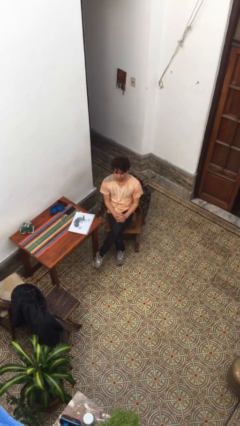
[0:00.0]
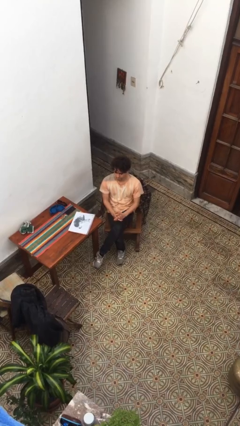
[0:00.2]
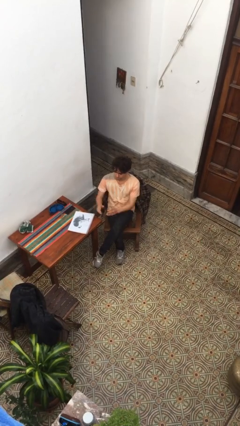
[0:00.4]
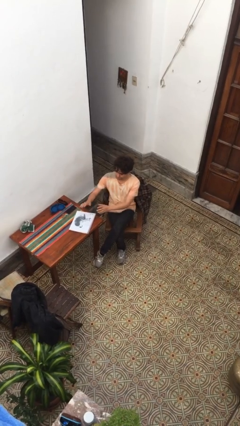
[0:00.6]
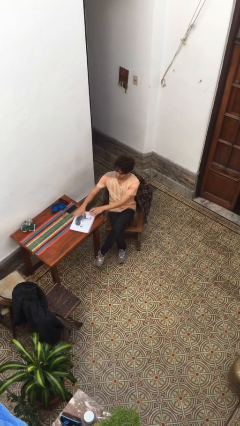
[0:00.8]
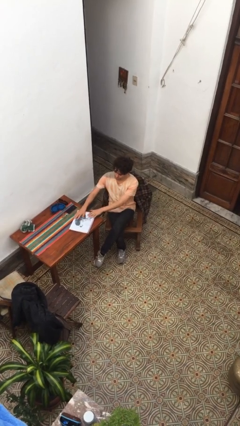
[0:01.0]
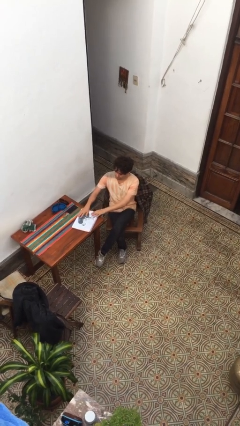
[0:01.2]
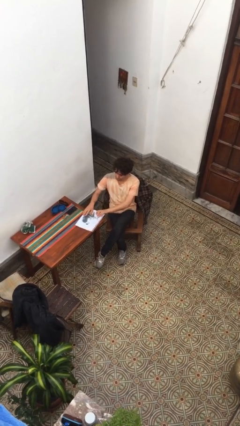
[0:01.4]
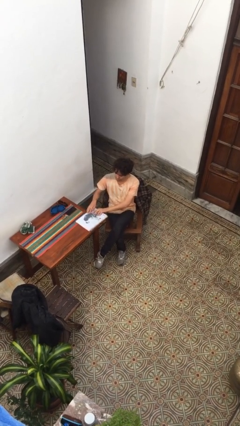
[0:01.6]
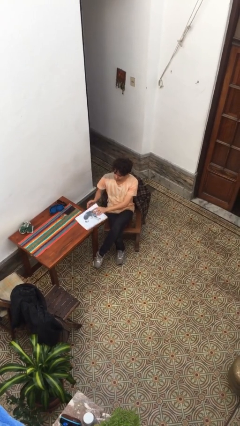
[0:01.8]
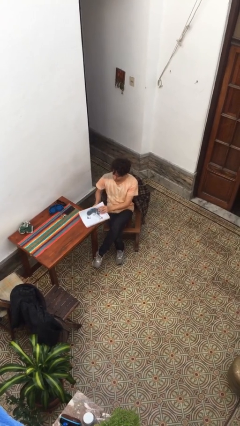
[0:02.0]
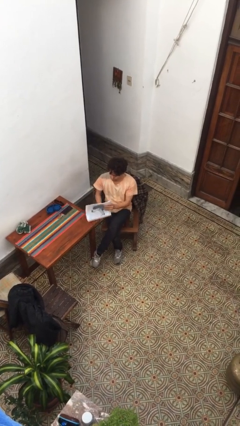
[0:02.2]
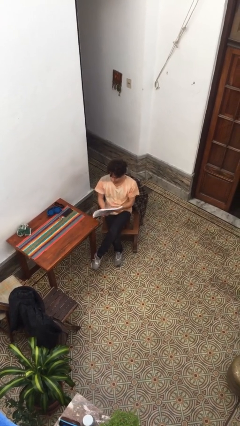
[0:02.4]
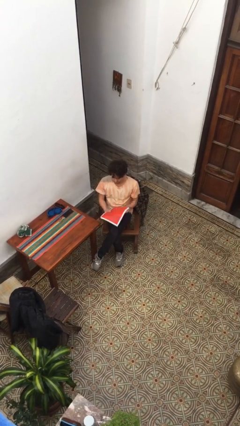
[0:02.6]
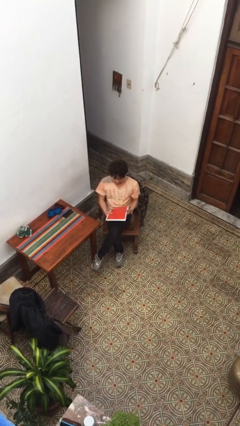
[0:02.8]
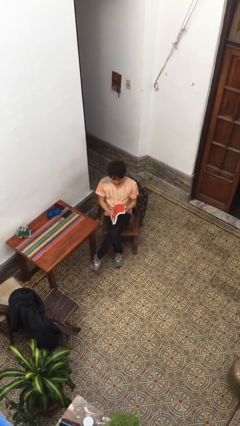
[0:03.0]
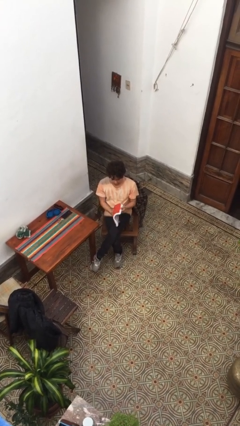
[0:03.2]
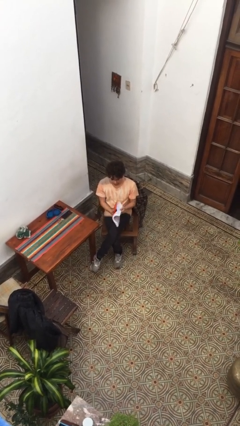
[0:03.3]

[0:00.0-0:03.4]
person picks up object from table

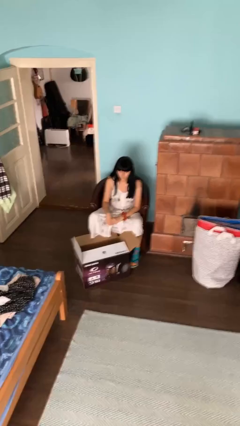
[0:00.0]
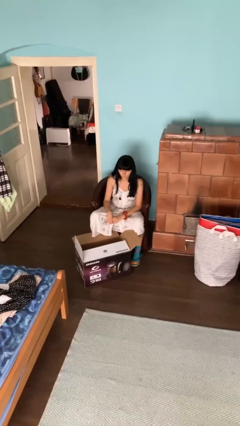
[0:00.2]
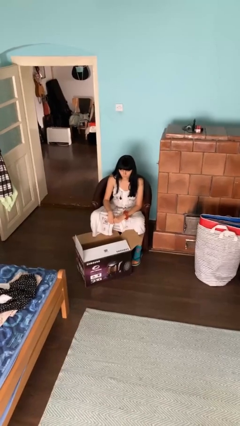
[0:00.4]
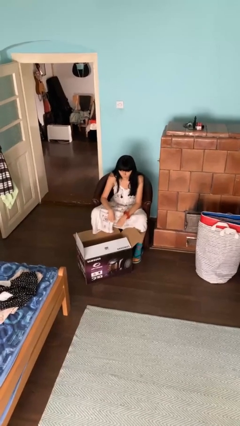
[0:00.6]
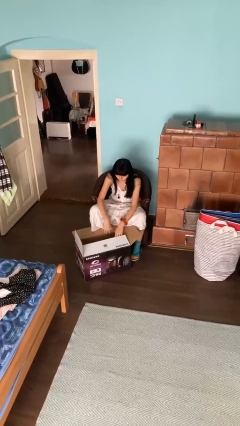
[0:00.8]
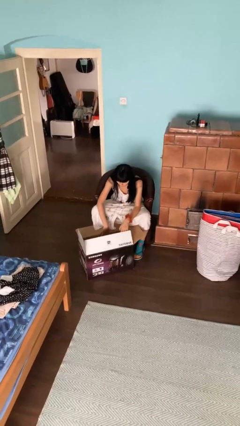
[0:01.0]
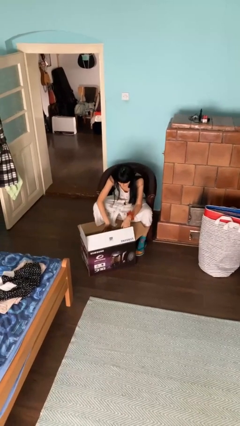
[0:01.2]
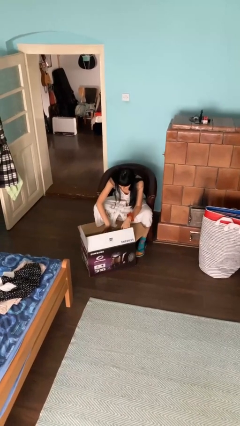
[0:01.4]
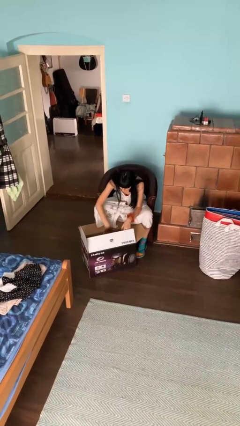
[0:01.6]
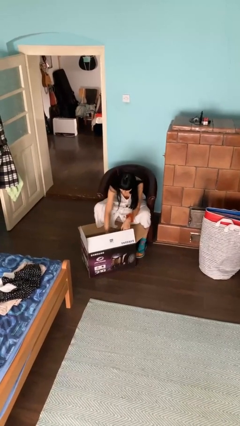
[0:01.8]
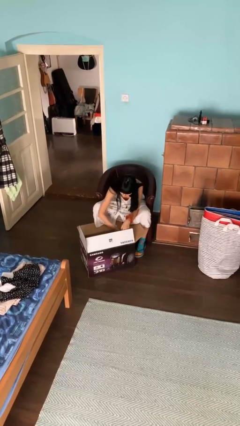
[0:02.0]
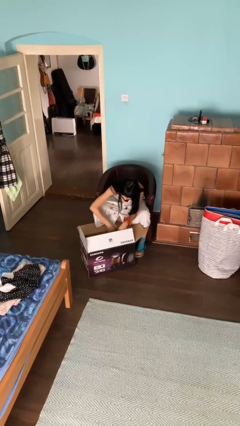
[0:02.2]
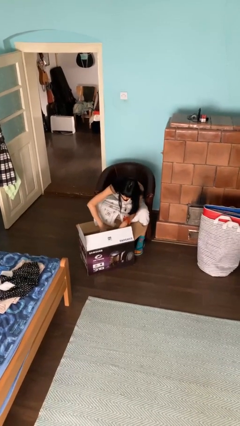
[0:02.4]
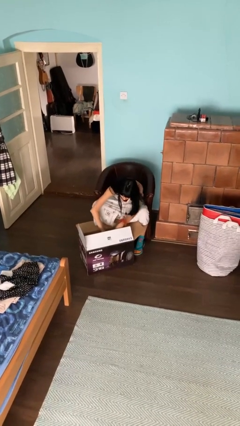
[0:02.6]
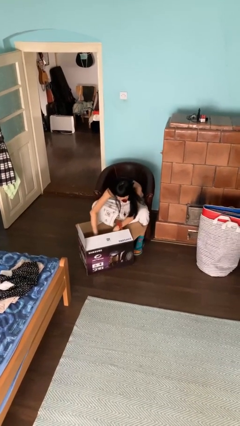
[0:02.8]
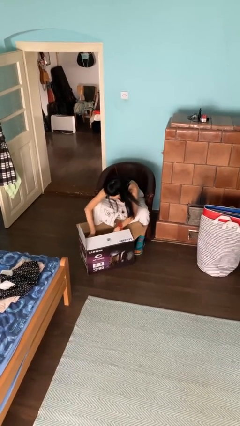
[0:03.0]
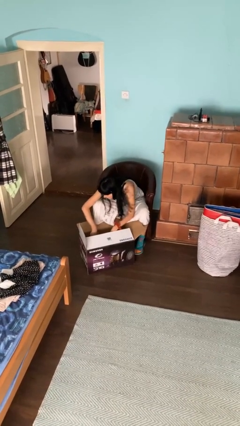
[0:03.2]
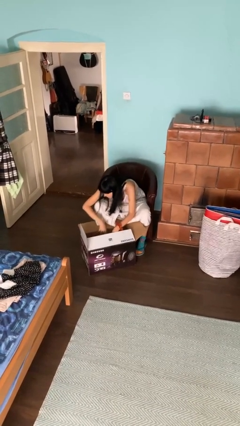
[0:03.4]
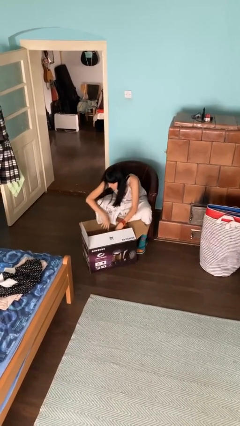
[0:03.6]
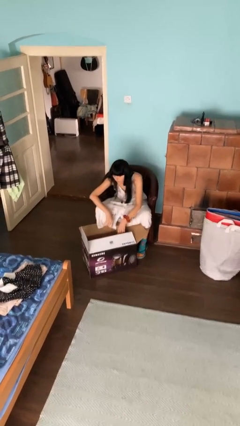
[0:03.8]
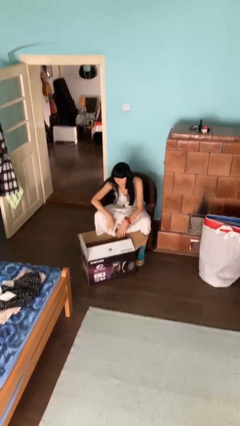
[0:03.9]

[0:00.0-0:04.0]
person searches in box

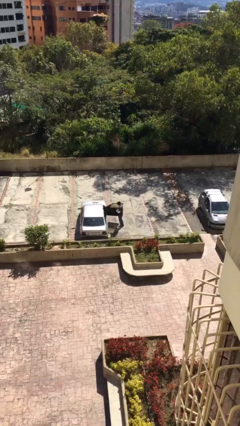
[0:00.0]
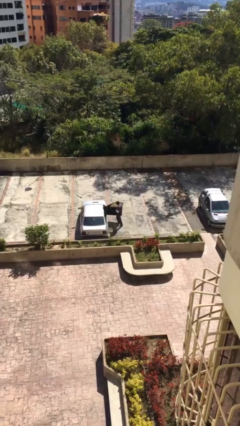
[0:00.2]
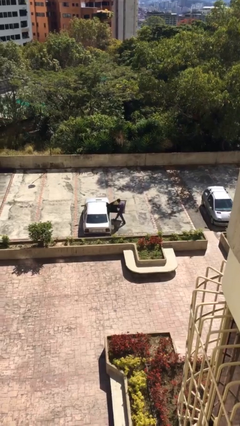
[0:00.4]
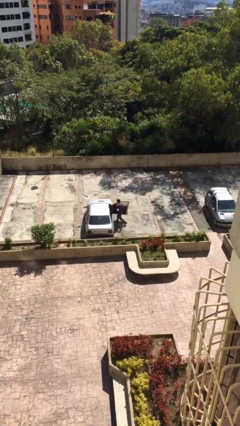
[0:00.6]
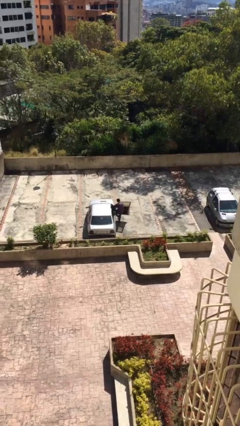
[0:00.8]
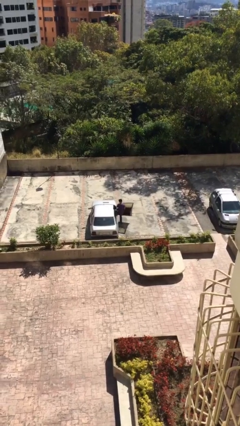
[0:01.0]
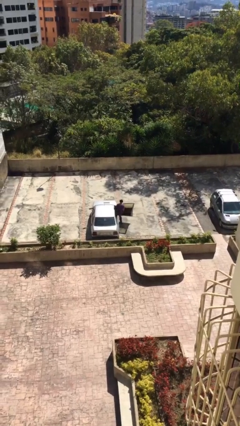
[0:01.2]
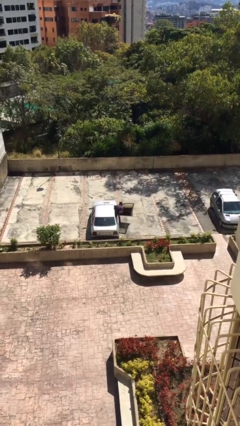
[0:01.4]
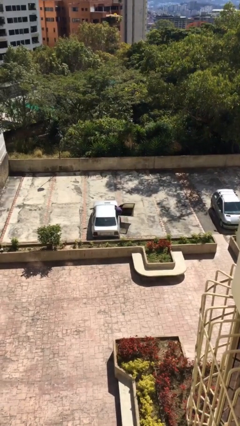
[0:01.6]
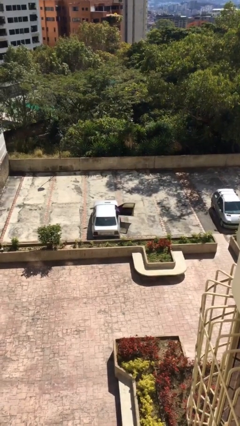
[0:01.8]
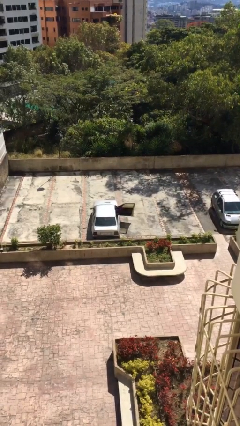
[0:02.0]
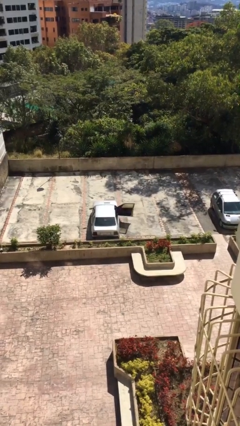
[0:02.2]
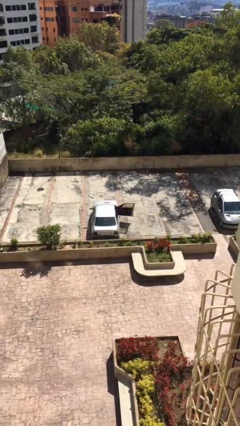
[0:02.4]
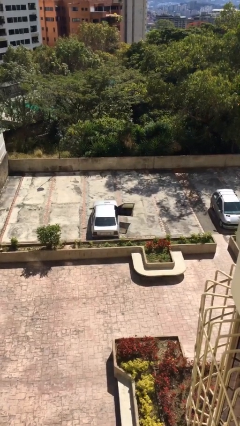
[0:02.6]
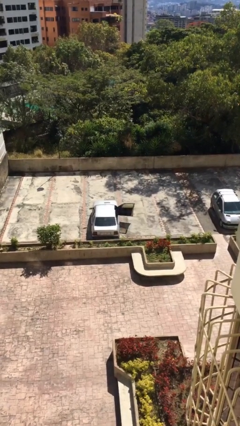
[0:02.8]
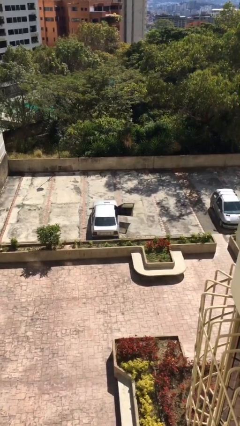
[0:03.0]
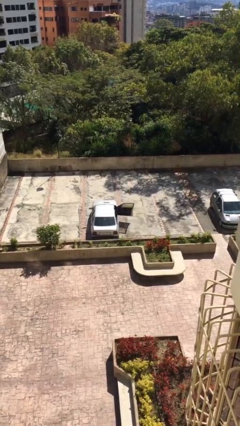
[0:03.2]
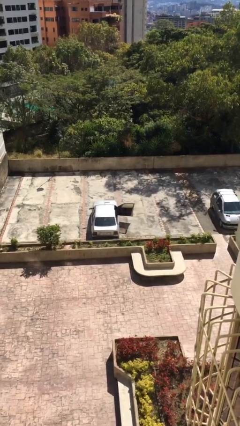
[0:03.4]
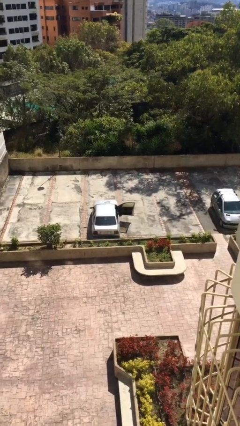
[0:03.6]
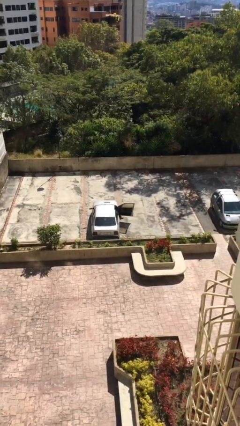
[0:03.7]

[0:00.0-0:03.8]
person enters car

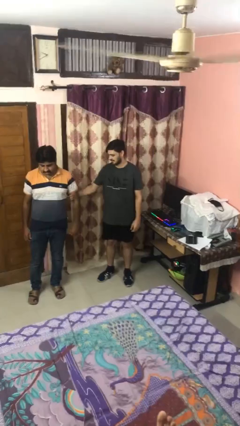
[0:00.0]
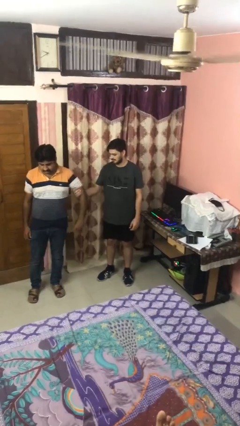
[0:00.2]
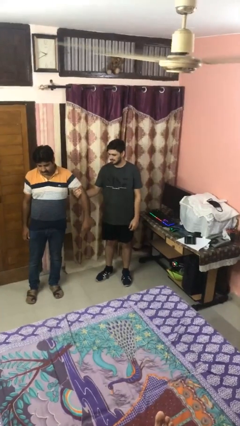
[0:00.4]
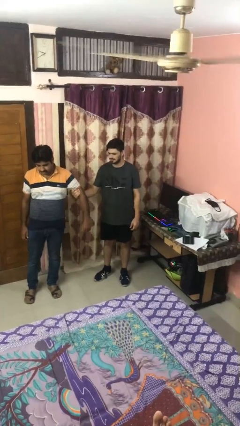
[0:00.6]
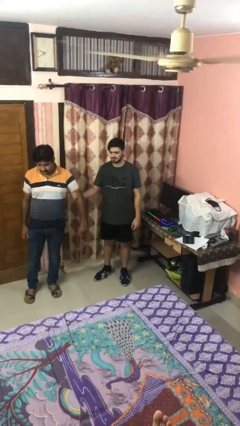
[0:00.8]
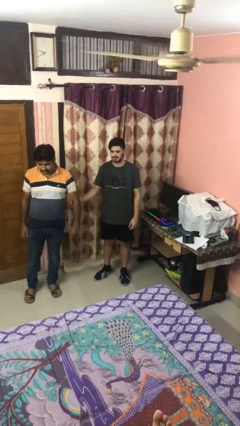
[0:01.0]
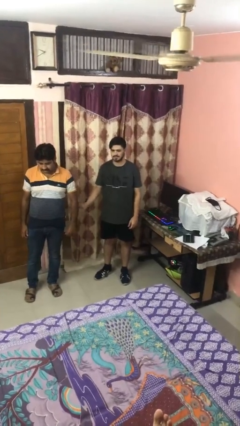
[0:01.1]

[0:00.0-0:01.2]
person grabs person by bicep

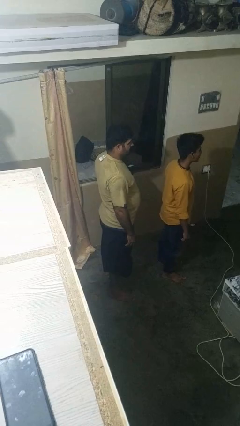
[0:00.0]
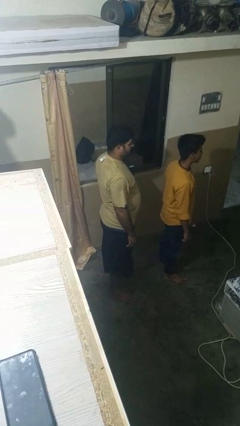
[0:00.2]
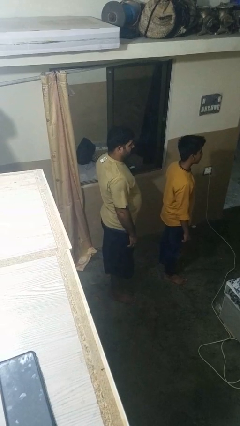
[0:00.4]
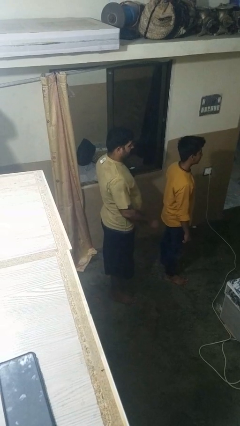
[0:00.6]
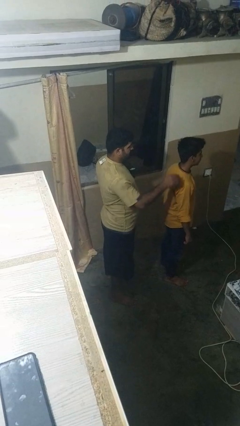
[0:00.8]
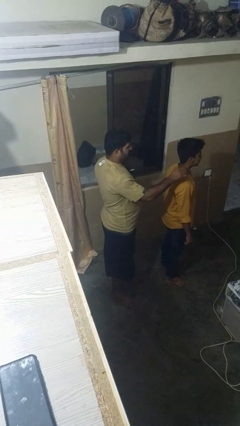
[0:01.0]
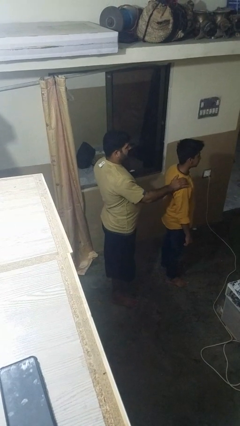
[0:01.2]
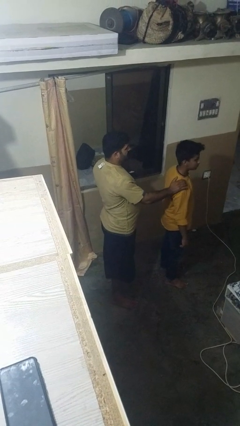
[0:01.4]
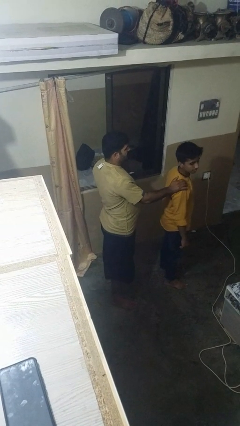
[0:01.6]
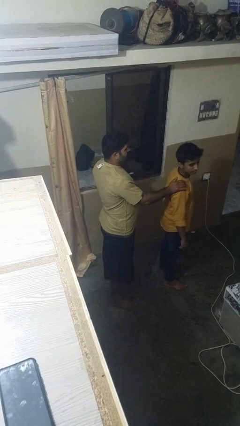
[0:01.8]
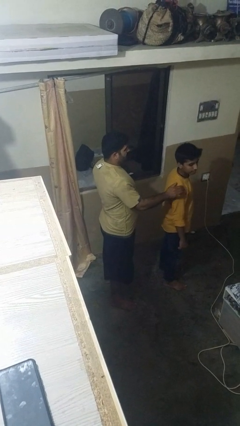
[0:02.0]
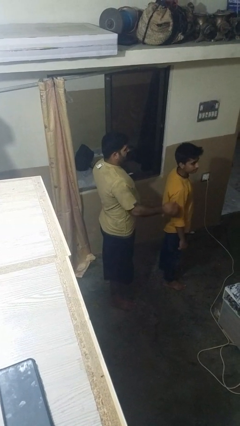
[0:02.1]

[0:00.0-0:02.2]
person waves at person

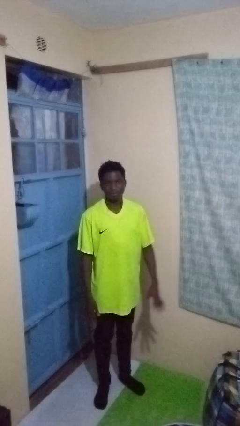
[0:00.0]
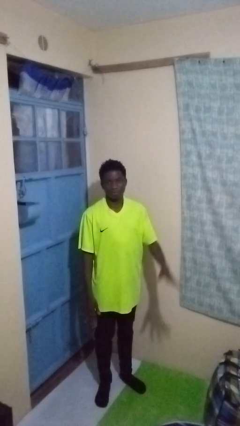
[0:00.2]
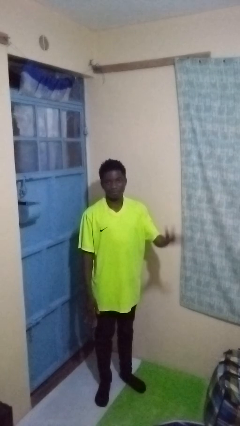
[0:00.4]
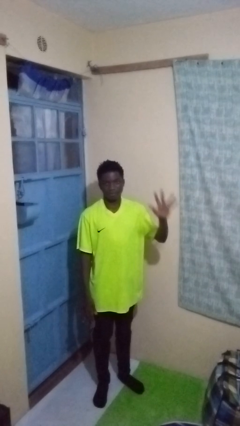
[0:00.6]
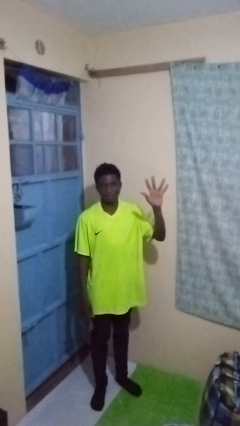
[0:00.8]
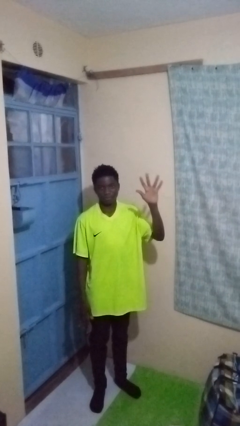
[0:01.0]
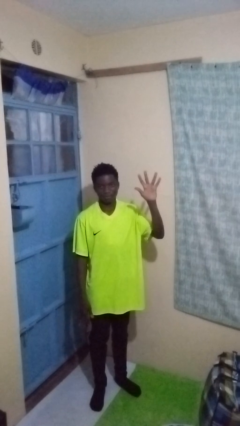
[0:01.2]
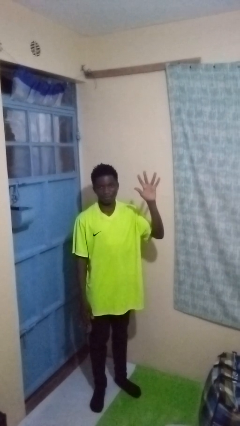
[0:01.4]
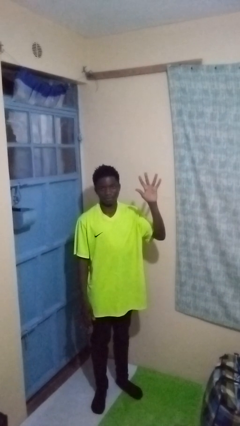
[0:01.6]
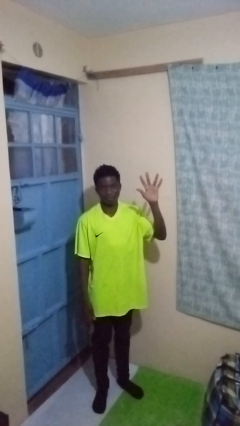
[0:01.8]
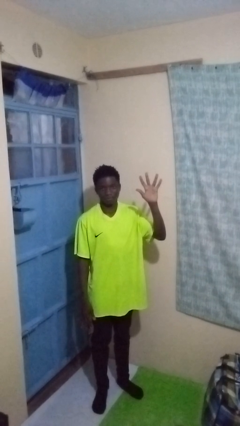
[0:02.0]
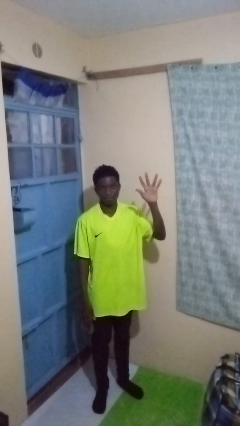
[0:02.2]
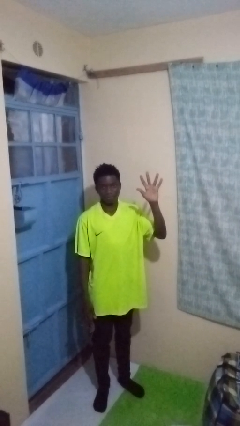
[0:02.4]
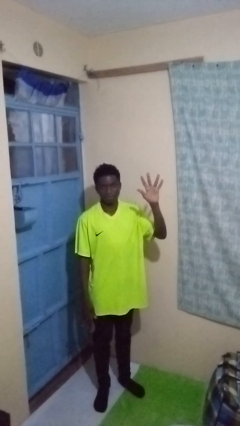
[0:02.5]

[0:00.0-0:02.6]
person gestures number five

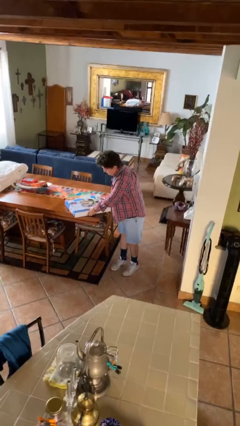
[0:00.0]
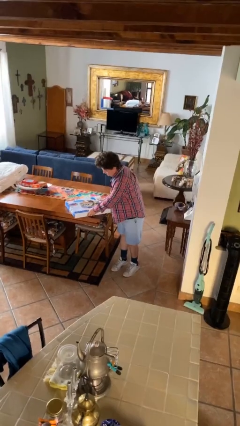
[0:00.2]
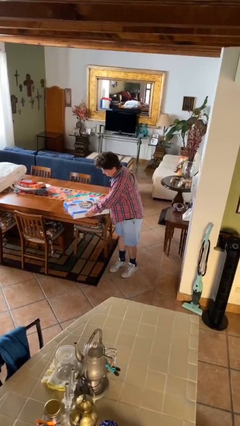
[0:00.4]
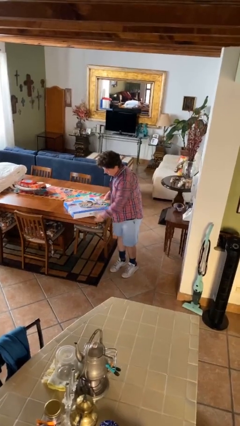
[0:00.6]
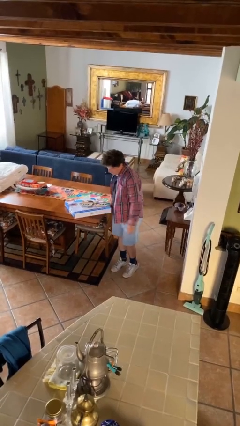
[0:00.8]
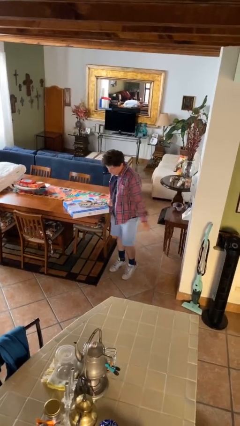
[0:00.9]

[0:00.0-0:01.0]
person puts down object on table
